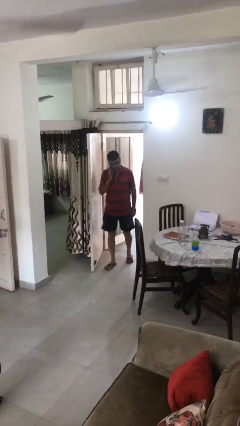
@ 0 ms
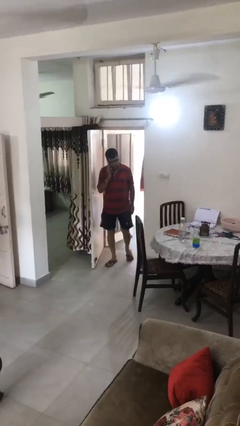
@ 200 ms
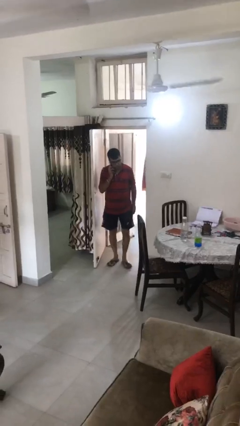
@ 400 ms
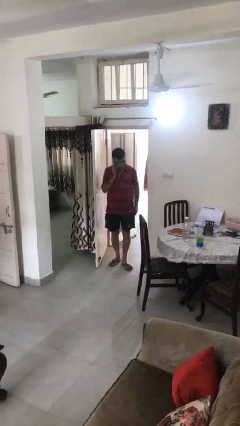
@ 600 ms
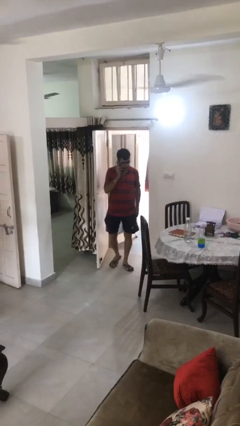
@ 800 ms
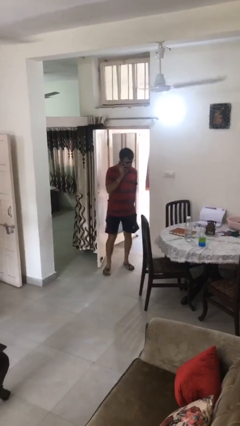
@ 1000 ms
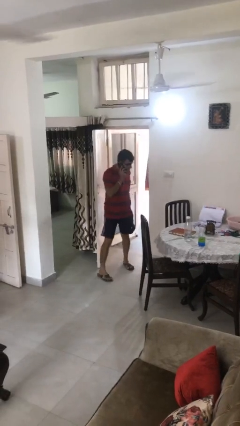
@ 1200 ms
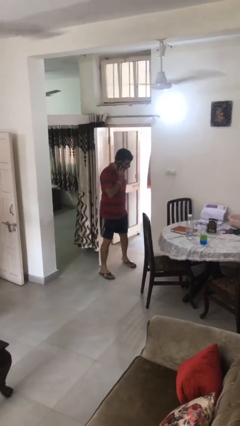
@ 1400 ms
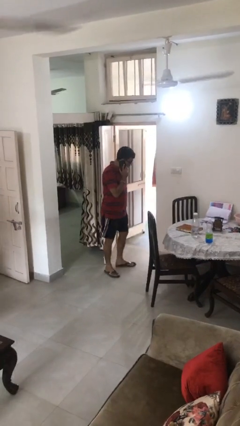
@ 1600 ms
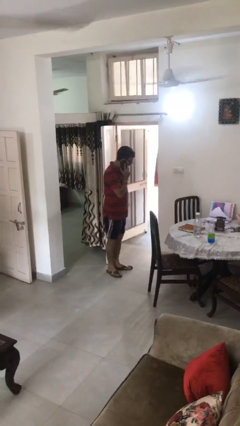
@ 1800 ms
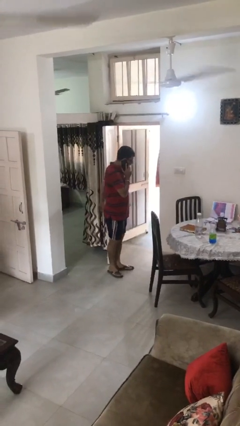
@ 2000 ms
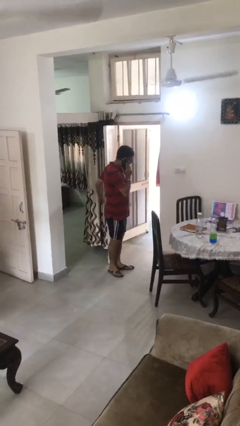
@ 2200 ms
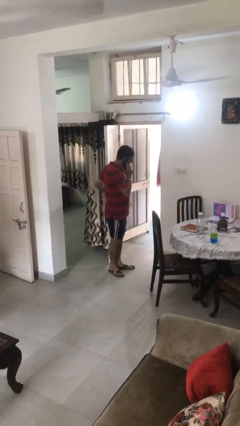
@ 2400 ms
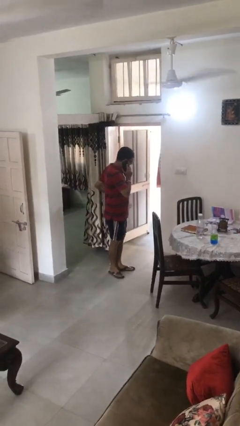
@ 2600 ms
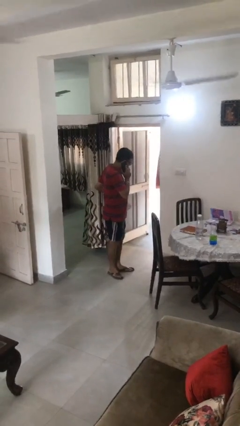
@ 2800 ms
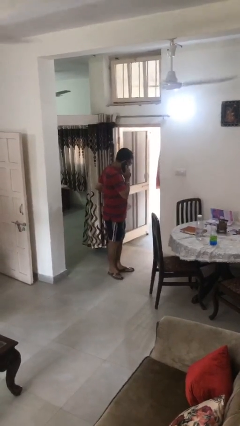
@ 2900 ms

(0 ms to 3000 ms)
person enters scene through structure

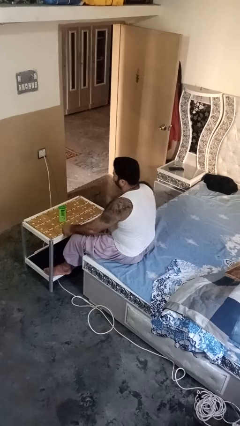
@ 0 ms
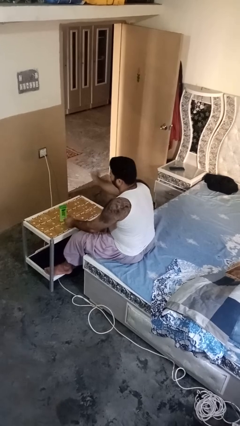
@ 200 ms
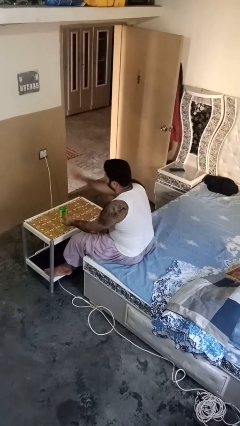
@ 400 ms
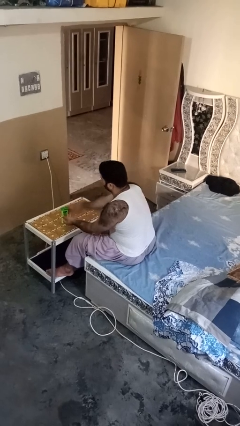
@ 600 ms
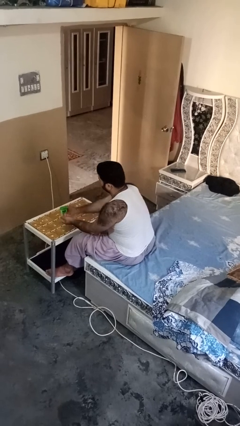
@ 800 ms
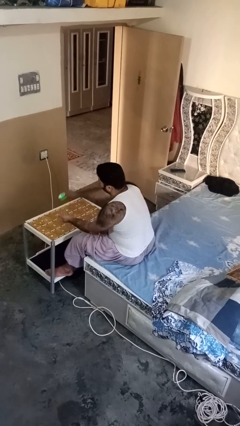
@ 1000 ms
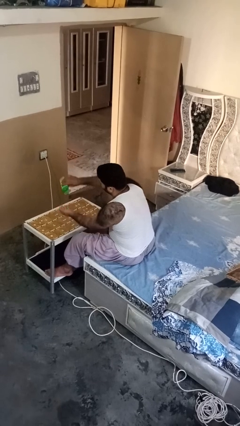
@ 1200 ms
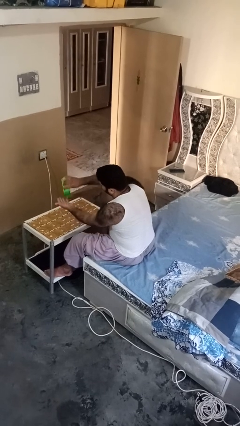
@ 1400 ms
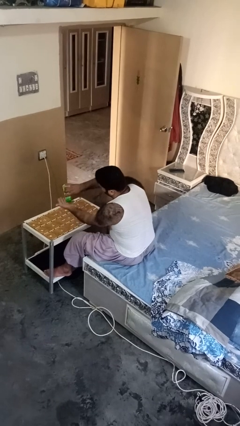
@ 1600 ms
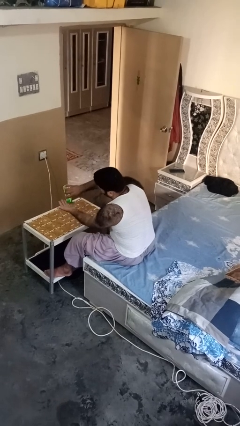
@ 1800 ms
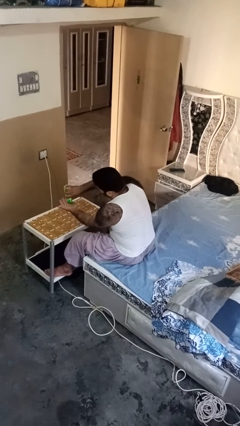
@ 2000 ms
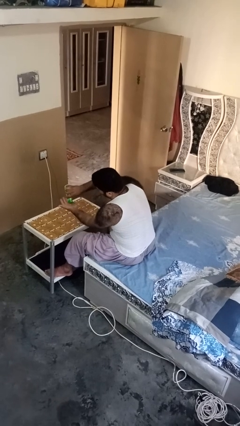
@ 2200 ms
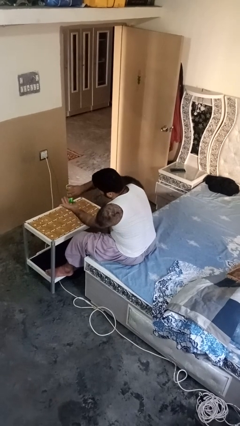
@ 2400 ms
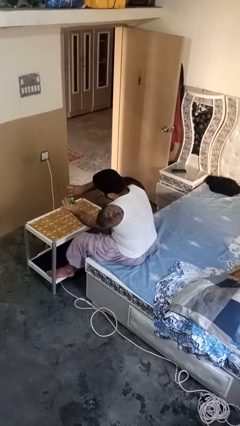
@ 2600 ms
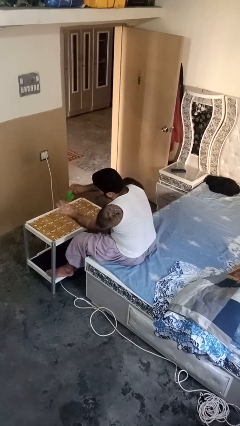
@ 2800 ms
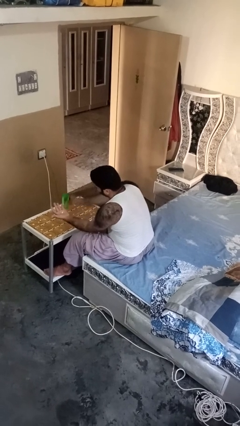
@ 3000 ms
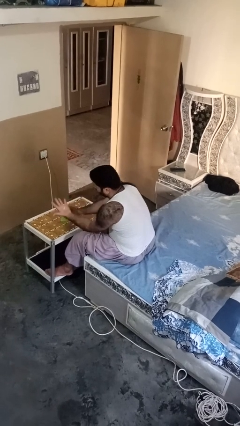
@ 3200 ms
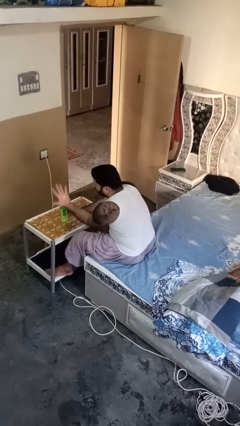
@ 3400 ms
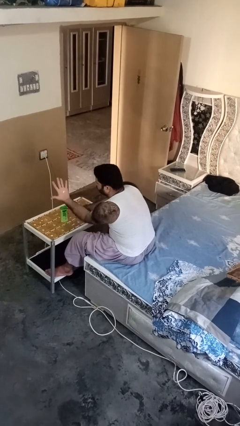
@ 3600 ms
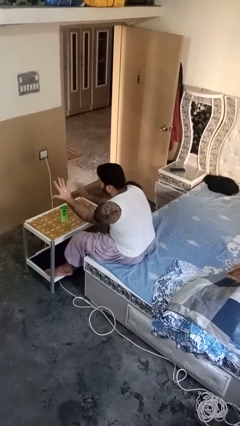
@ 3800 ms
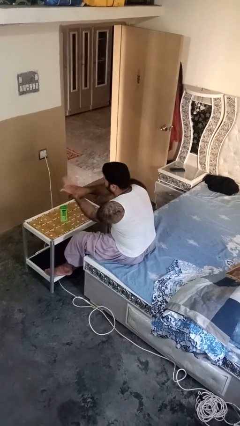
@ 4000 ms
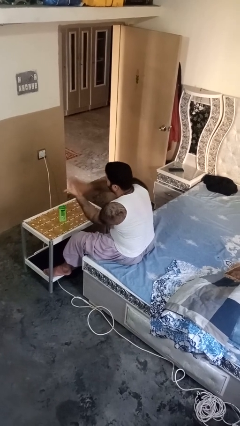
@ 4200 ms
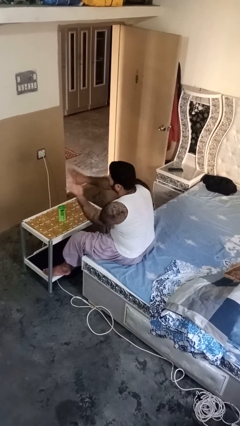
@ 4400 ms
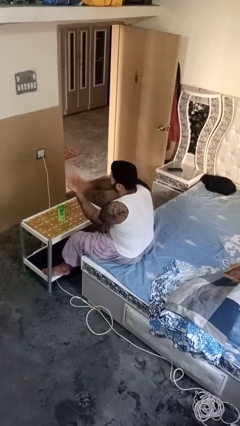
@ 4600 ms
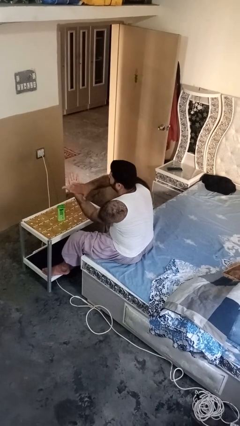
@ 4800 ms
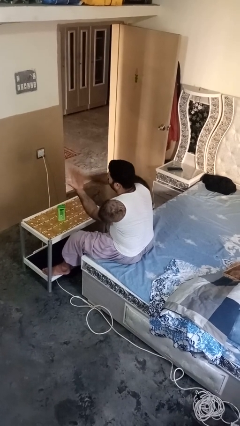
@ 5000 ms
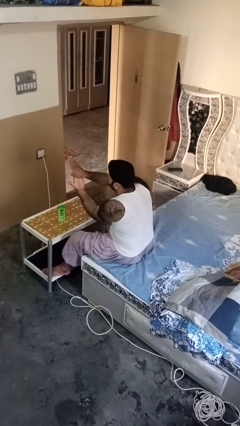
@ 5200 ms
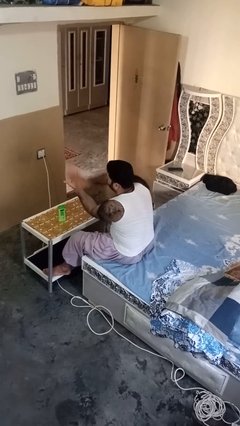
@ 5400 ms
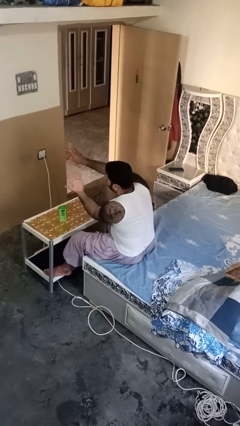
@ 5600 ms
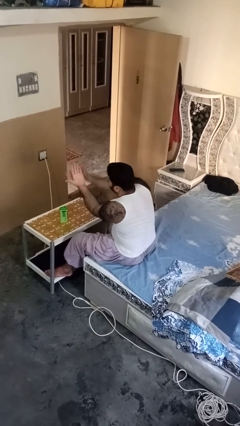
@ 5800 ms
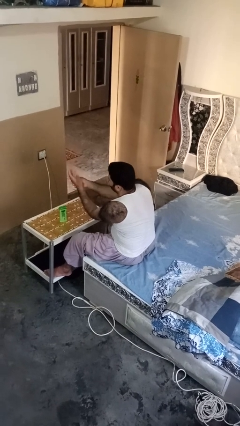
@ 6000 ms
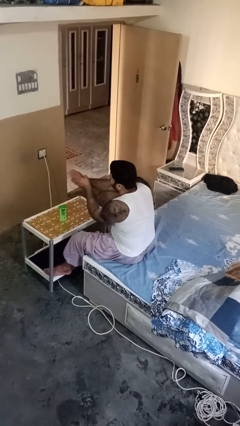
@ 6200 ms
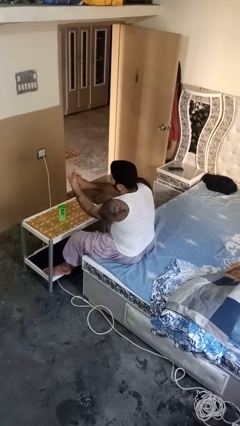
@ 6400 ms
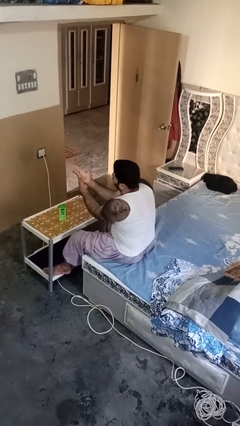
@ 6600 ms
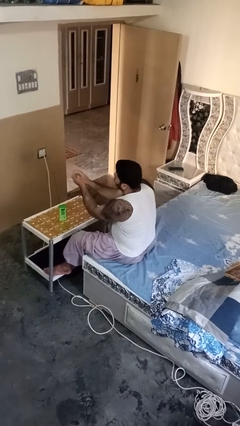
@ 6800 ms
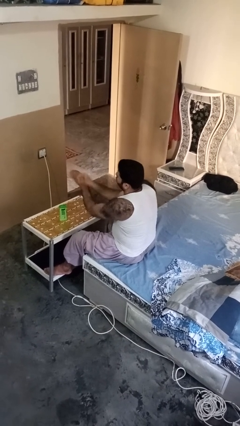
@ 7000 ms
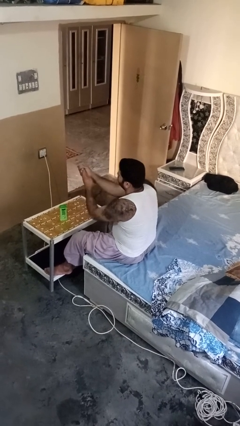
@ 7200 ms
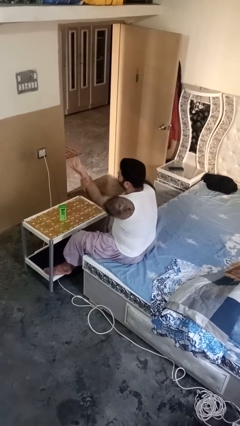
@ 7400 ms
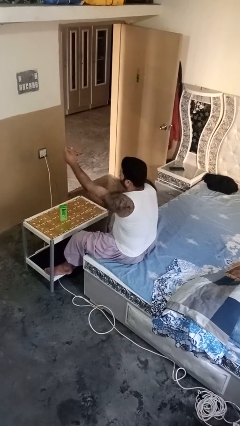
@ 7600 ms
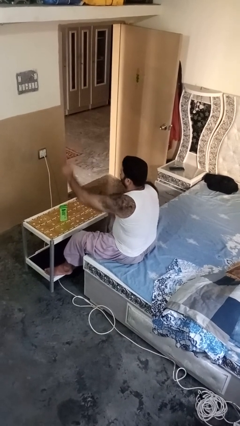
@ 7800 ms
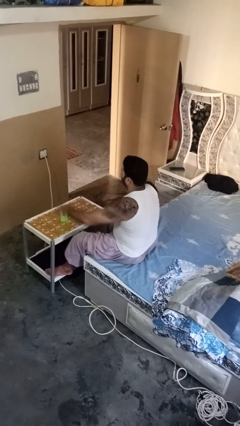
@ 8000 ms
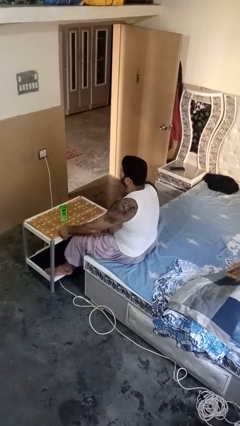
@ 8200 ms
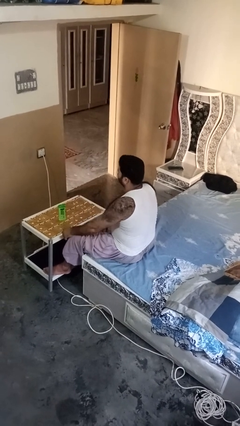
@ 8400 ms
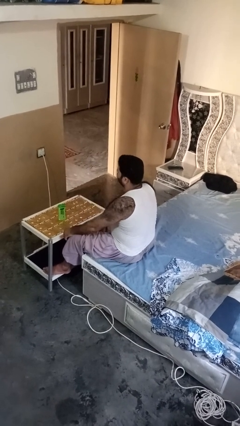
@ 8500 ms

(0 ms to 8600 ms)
person applies sunscreen

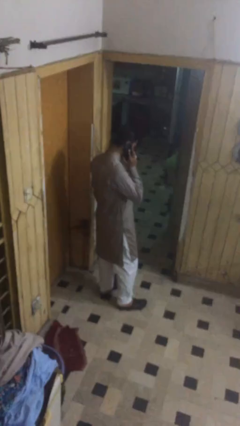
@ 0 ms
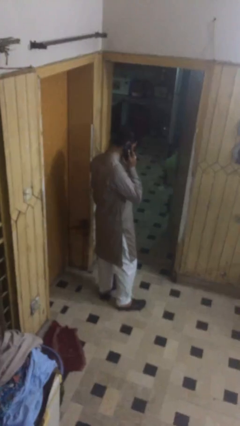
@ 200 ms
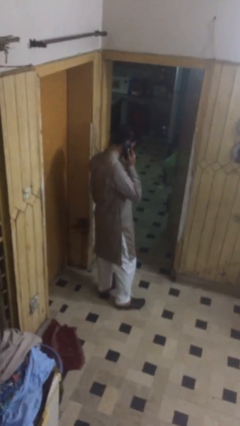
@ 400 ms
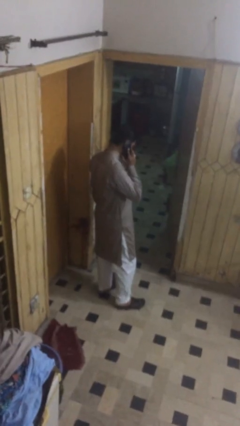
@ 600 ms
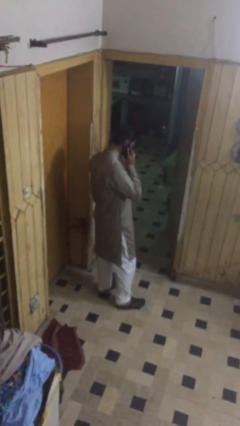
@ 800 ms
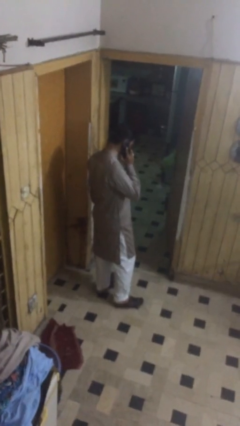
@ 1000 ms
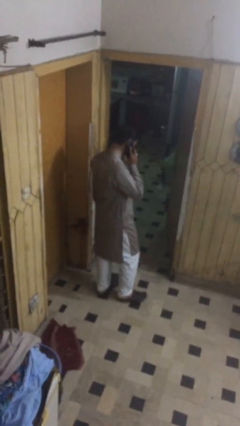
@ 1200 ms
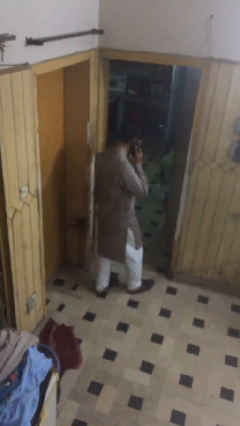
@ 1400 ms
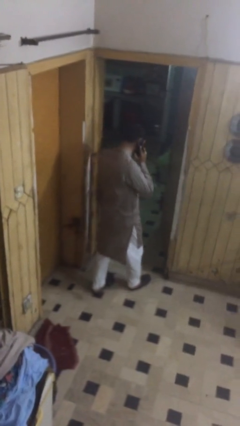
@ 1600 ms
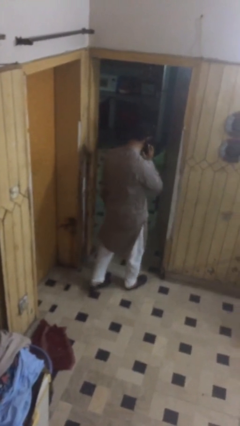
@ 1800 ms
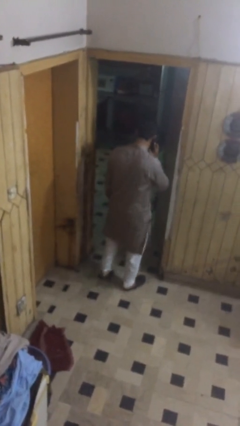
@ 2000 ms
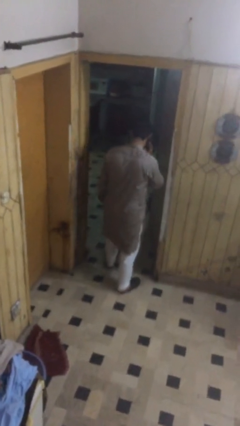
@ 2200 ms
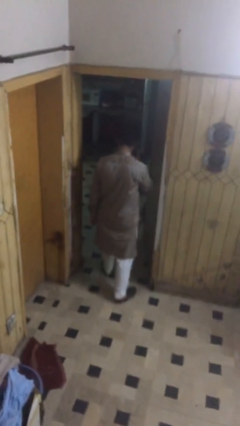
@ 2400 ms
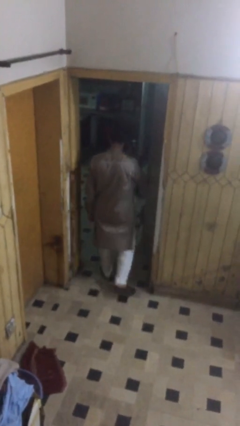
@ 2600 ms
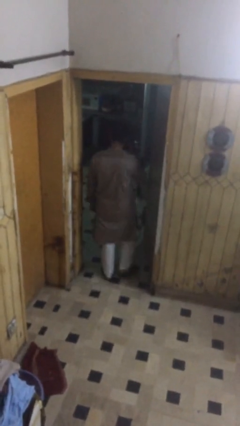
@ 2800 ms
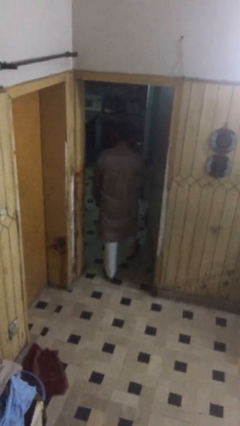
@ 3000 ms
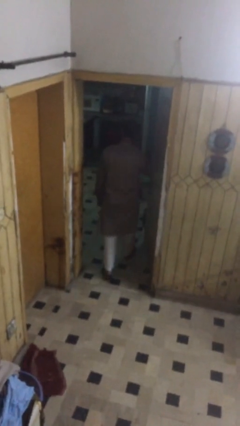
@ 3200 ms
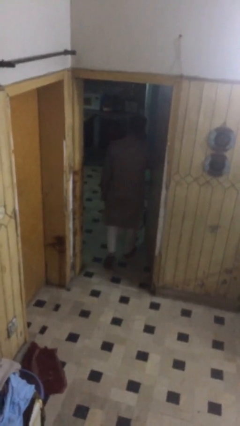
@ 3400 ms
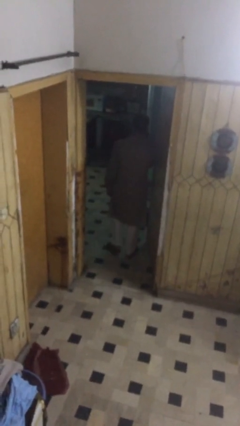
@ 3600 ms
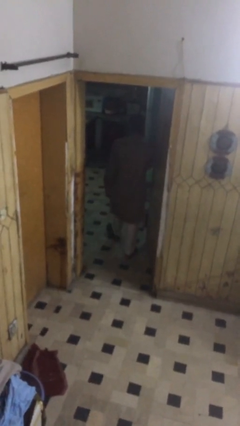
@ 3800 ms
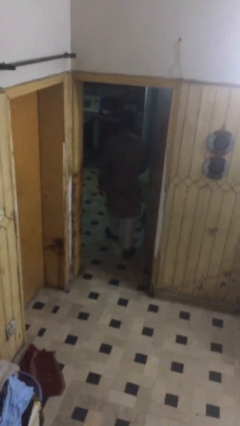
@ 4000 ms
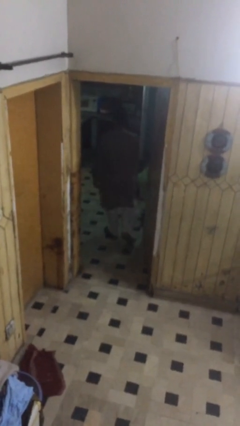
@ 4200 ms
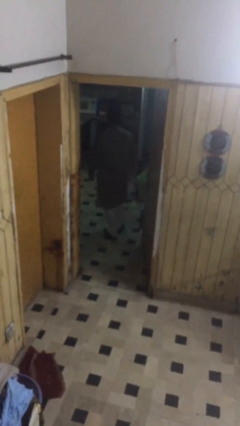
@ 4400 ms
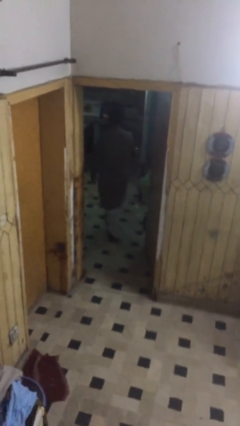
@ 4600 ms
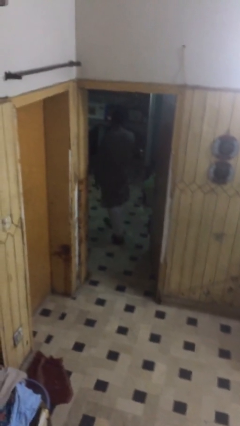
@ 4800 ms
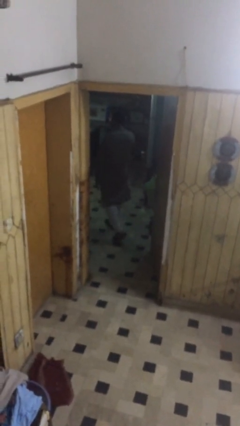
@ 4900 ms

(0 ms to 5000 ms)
person exits scene through structure

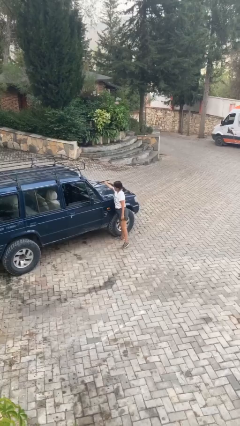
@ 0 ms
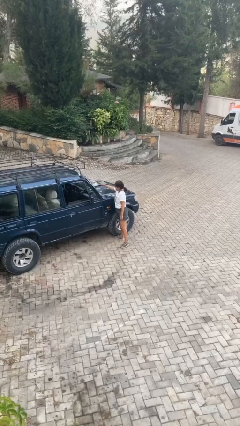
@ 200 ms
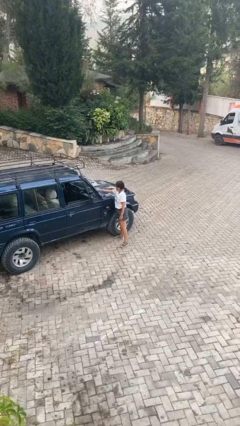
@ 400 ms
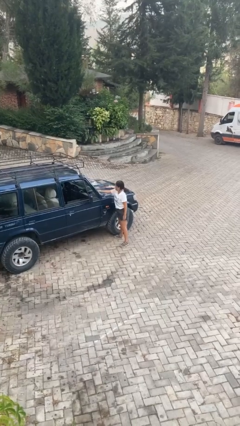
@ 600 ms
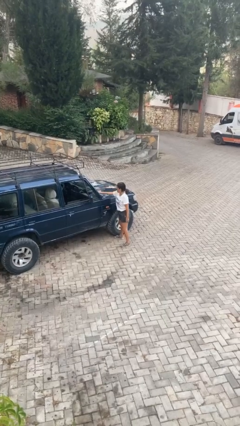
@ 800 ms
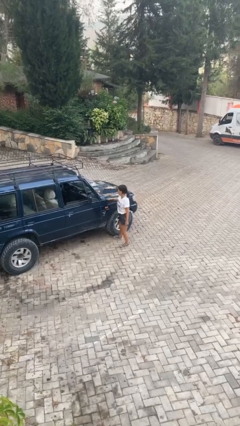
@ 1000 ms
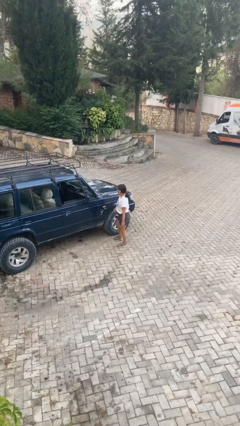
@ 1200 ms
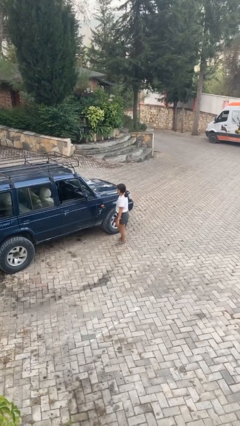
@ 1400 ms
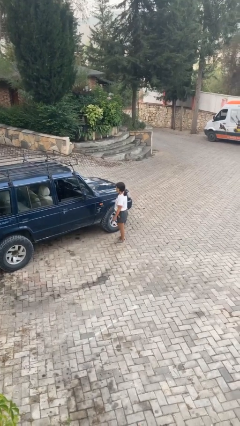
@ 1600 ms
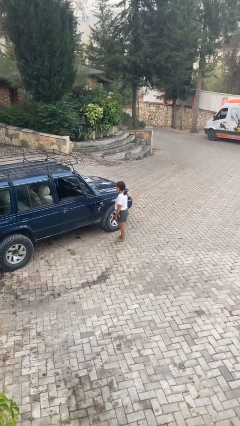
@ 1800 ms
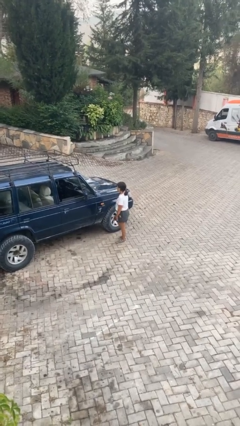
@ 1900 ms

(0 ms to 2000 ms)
person flips down car wipers
